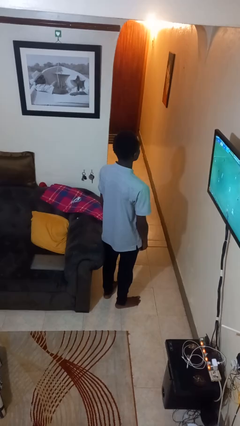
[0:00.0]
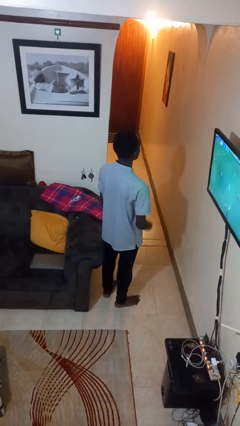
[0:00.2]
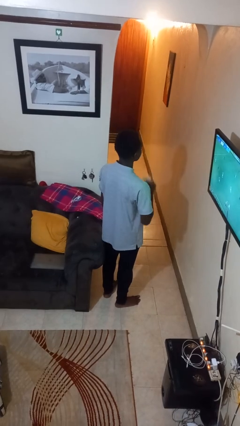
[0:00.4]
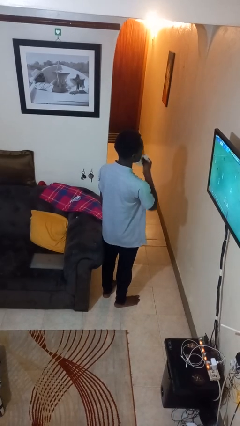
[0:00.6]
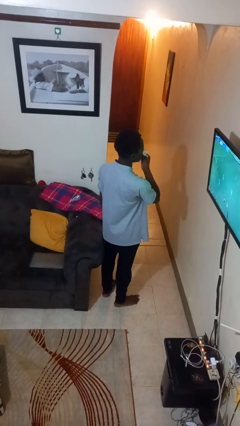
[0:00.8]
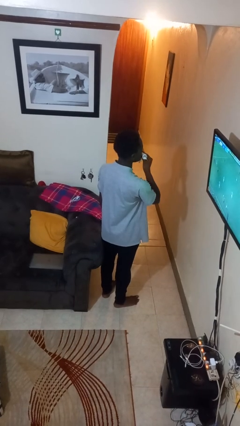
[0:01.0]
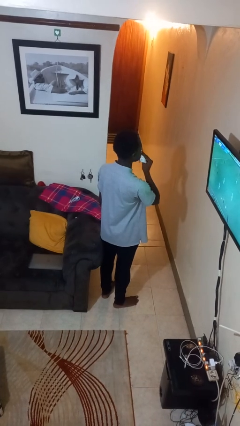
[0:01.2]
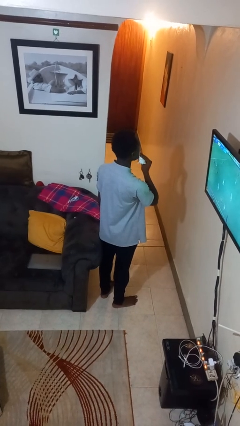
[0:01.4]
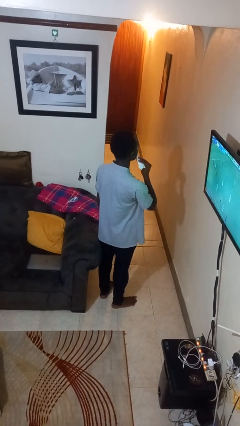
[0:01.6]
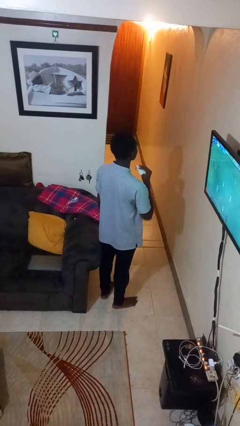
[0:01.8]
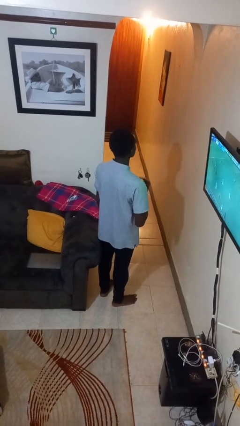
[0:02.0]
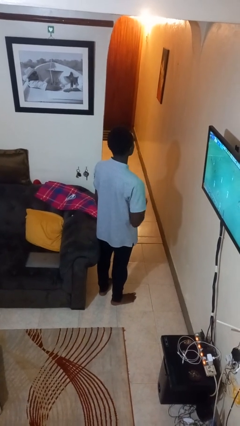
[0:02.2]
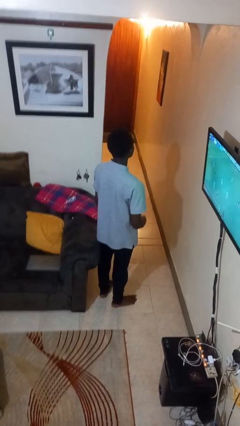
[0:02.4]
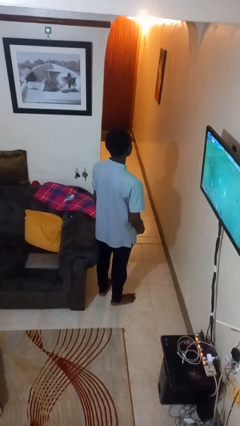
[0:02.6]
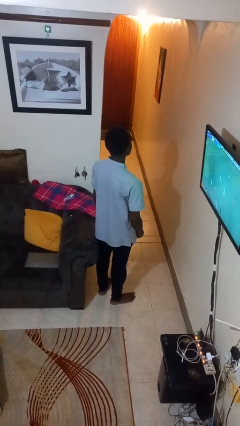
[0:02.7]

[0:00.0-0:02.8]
person wipes mouth with napkin

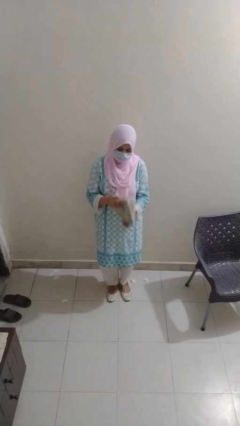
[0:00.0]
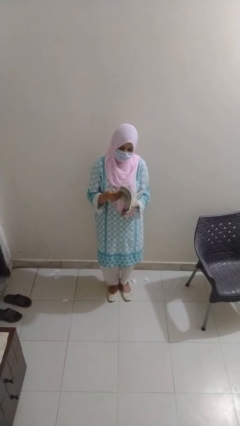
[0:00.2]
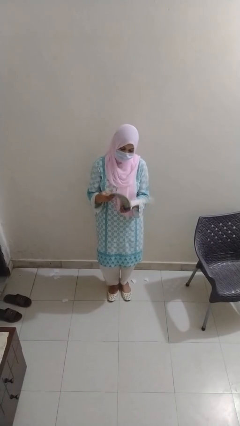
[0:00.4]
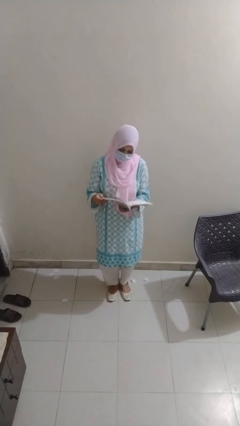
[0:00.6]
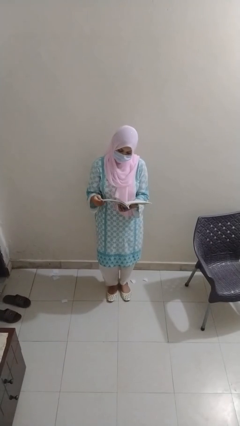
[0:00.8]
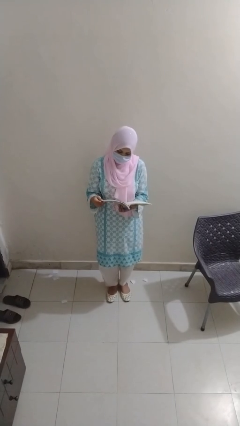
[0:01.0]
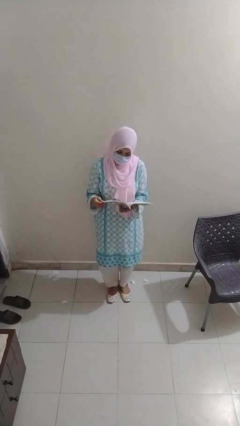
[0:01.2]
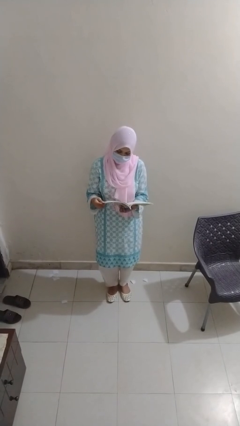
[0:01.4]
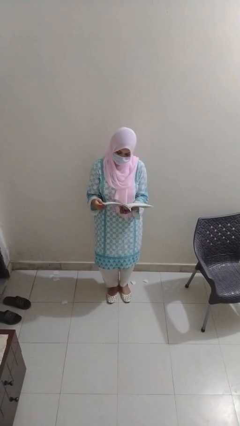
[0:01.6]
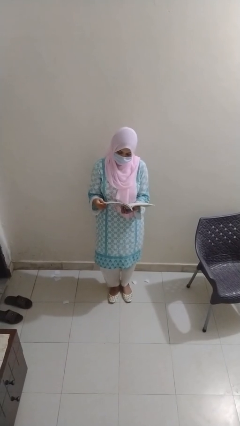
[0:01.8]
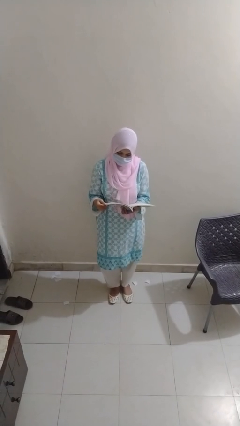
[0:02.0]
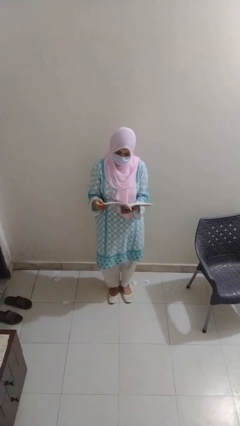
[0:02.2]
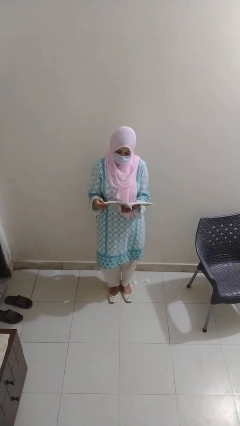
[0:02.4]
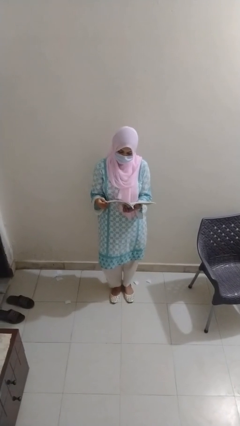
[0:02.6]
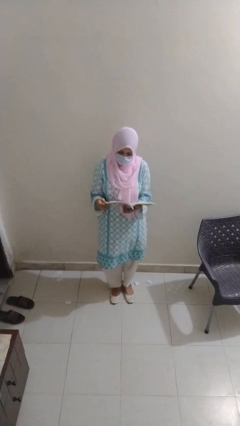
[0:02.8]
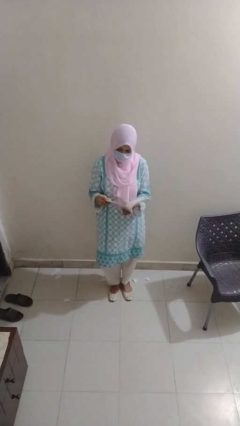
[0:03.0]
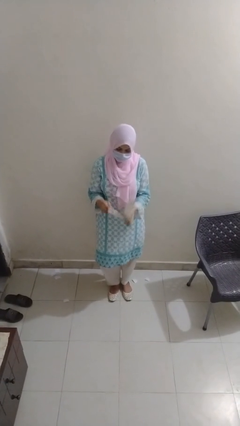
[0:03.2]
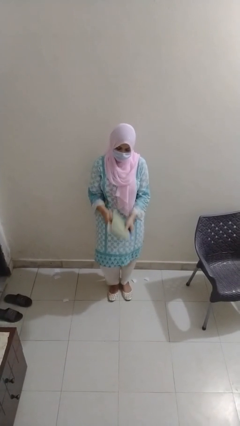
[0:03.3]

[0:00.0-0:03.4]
person reads book

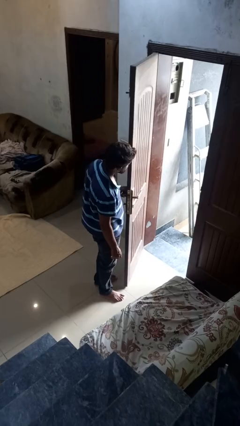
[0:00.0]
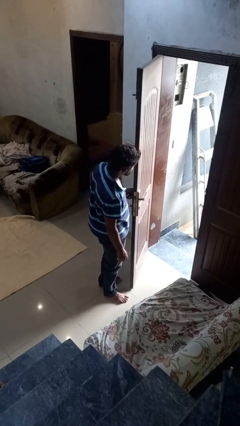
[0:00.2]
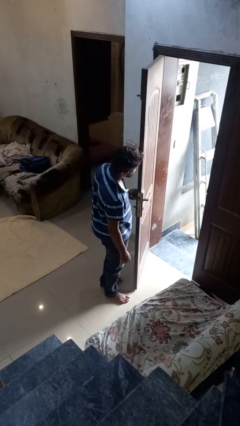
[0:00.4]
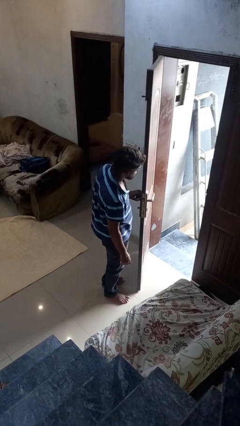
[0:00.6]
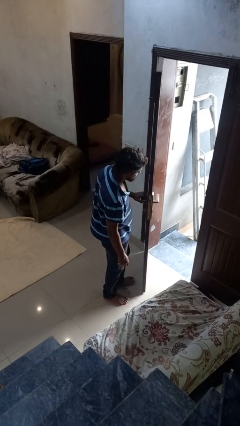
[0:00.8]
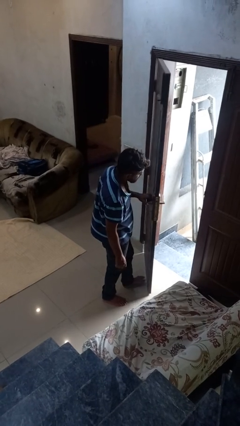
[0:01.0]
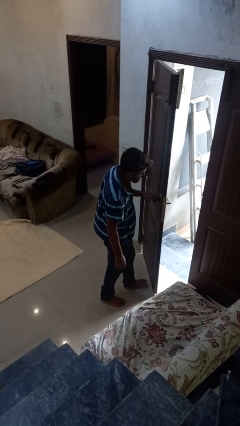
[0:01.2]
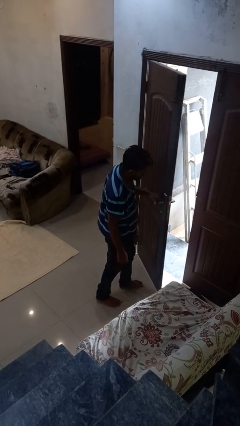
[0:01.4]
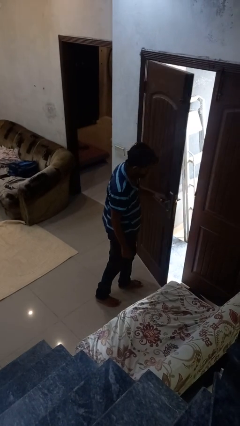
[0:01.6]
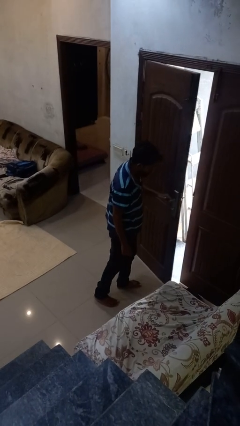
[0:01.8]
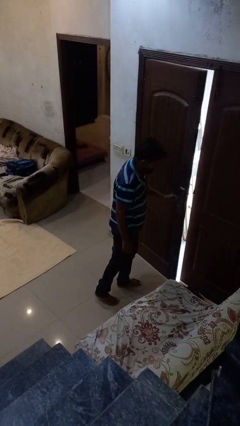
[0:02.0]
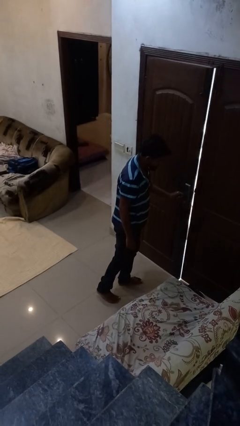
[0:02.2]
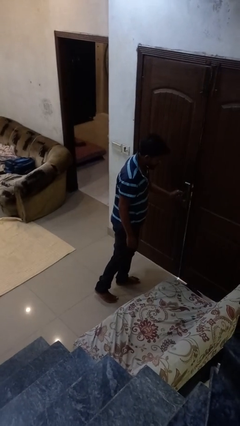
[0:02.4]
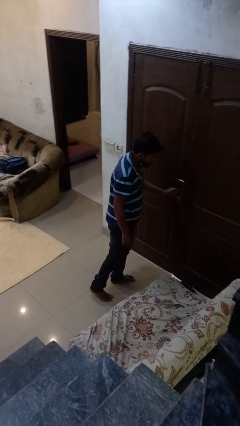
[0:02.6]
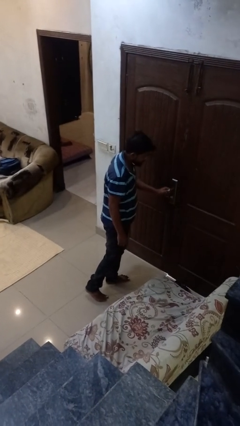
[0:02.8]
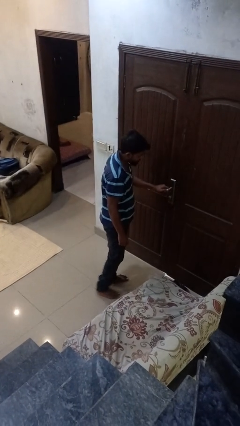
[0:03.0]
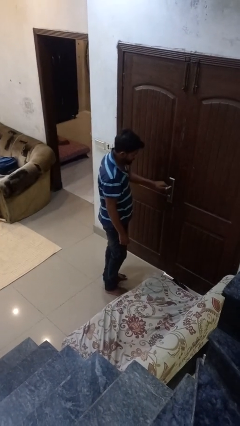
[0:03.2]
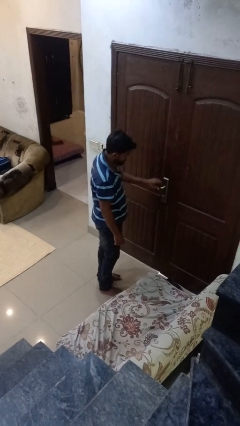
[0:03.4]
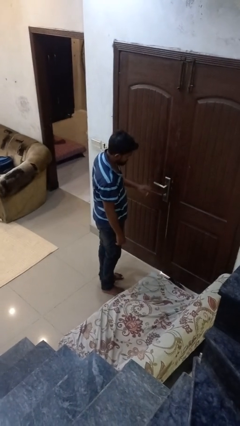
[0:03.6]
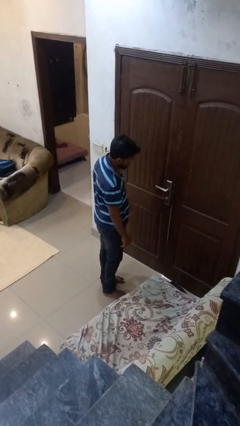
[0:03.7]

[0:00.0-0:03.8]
person closes facility door

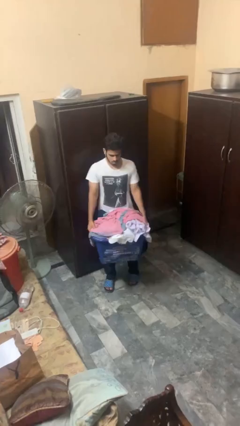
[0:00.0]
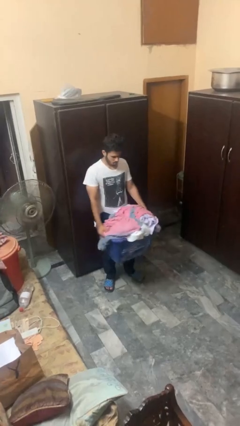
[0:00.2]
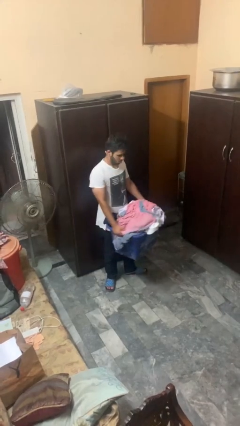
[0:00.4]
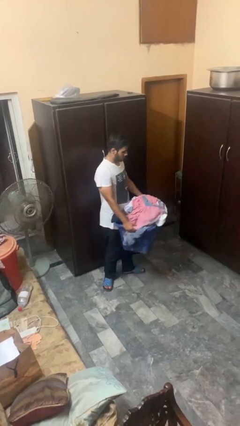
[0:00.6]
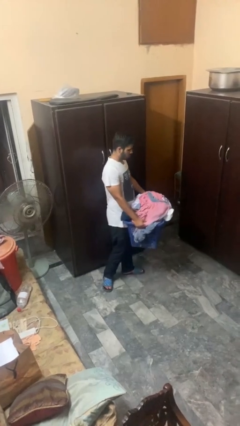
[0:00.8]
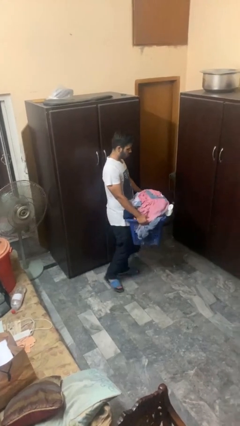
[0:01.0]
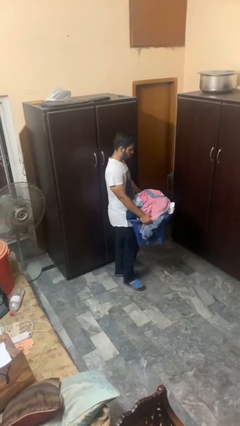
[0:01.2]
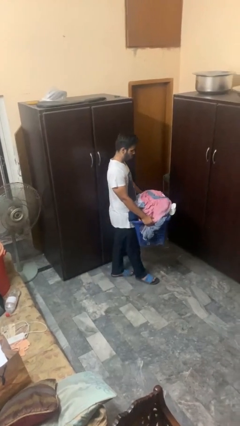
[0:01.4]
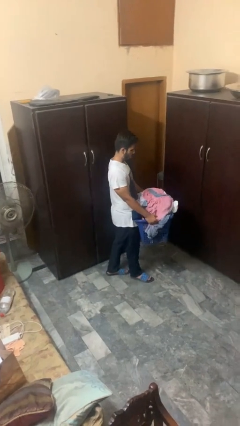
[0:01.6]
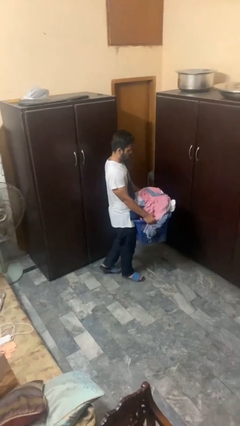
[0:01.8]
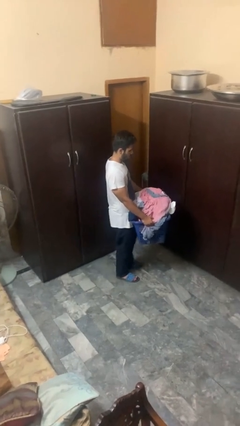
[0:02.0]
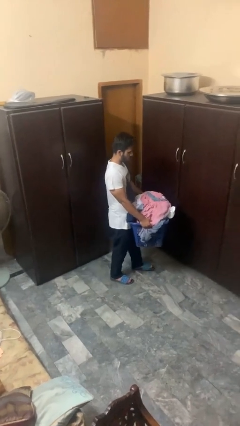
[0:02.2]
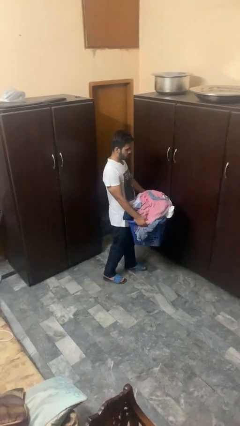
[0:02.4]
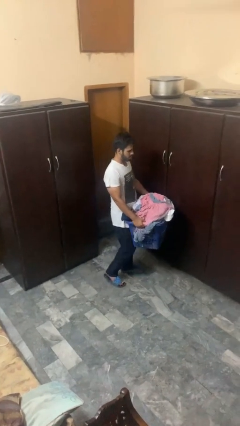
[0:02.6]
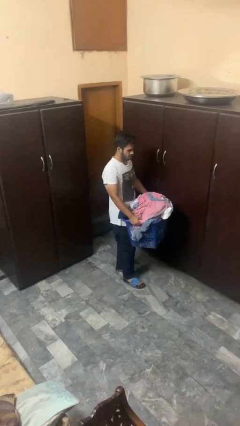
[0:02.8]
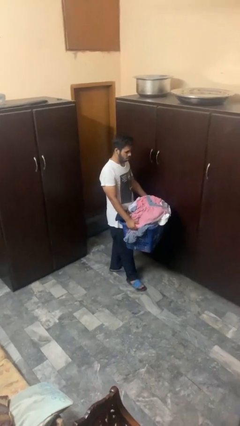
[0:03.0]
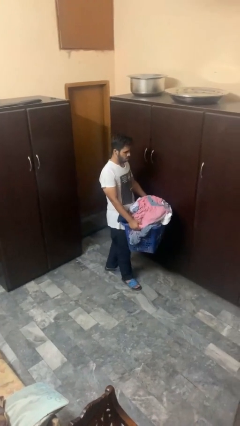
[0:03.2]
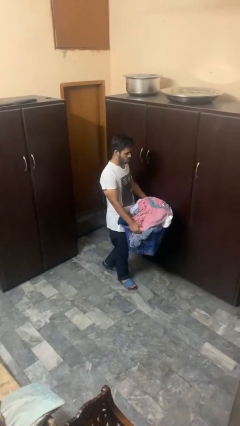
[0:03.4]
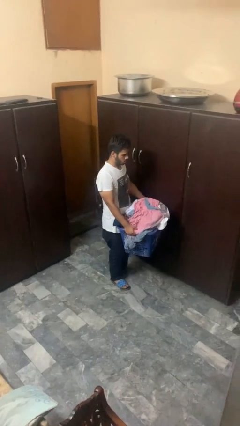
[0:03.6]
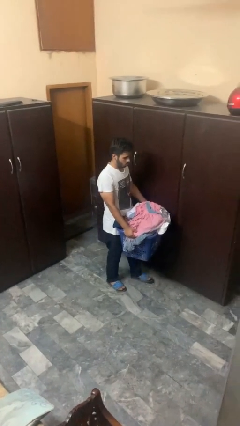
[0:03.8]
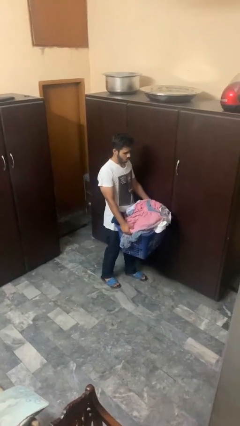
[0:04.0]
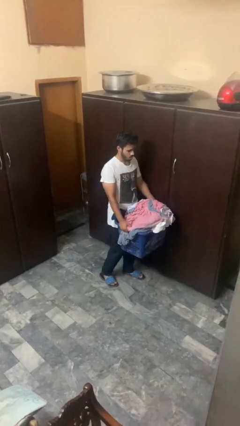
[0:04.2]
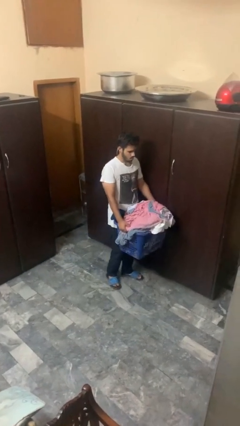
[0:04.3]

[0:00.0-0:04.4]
person carries laundry basket

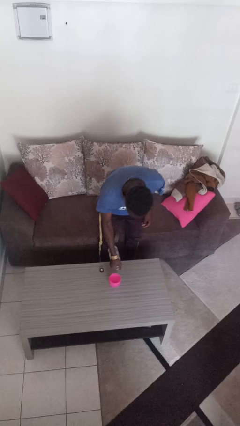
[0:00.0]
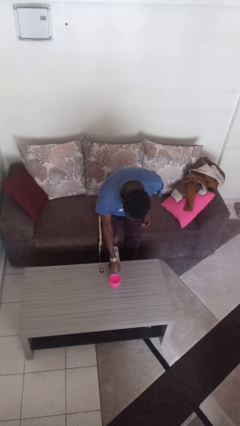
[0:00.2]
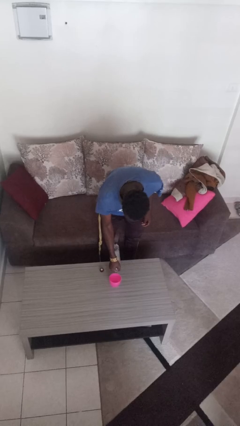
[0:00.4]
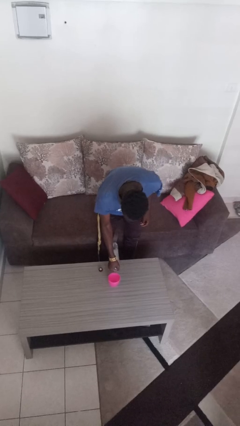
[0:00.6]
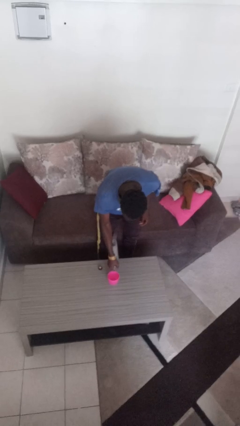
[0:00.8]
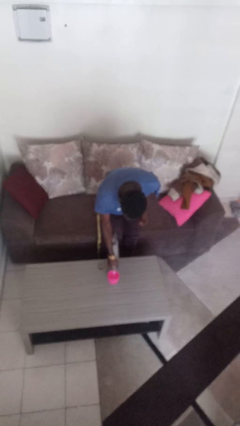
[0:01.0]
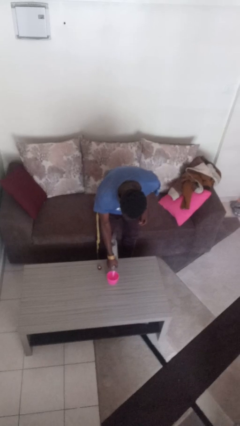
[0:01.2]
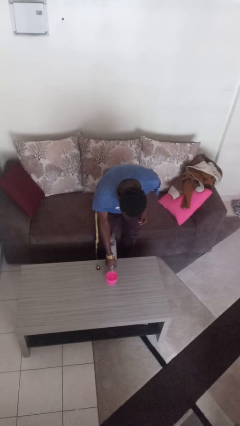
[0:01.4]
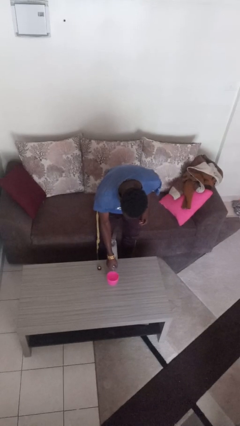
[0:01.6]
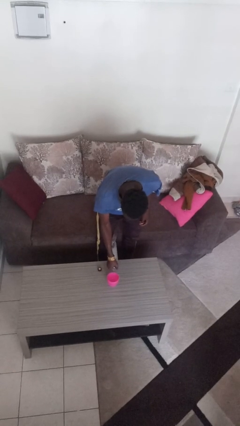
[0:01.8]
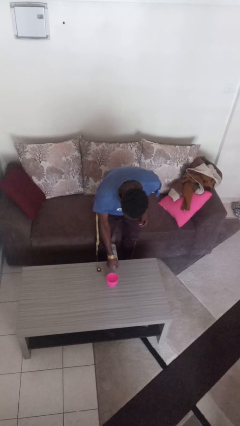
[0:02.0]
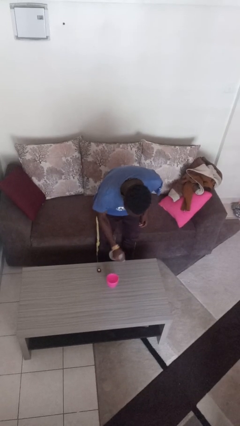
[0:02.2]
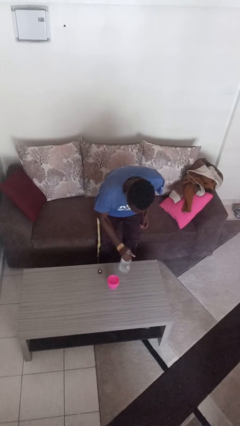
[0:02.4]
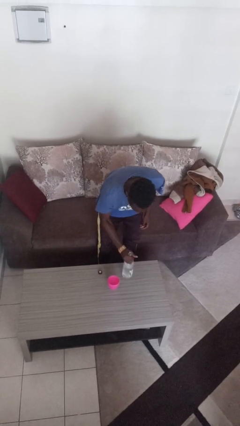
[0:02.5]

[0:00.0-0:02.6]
person pours liquid into cup

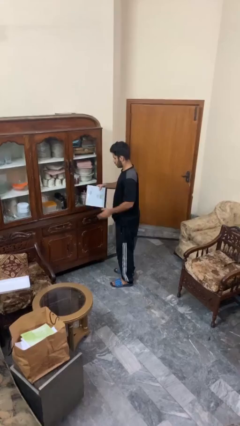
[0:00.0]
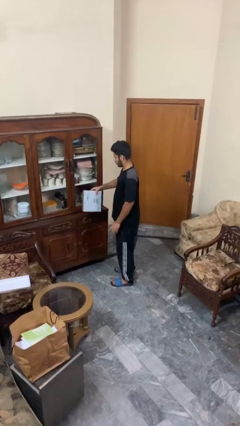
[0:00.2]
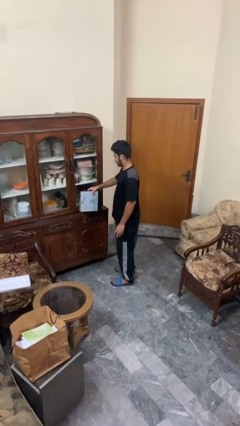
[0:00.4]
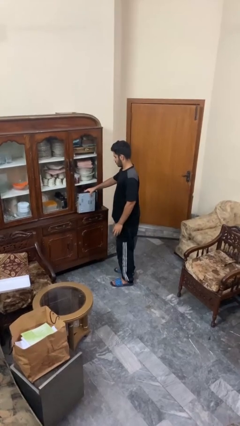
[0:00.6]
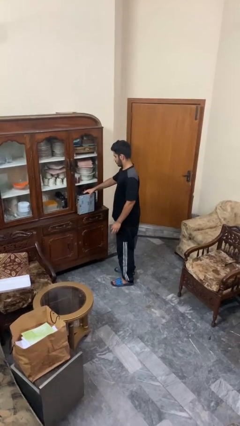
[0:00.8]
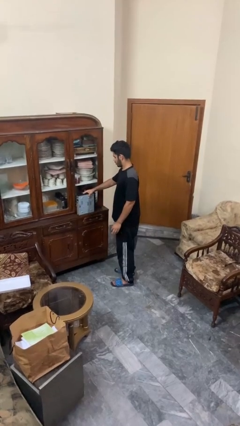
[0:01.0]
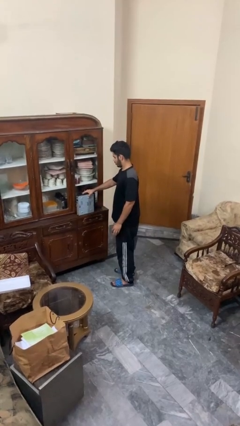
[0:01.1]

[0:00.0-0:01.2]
person puts down object on countertop
